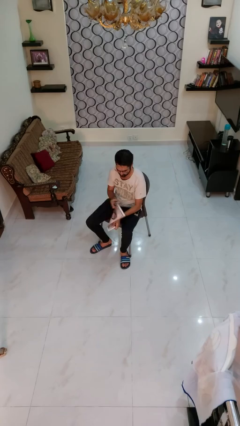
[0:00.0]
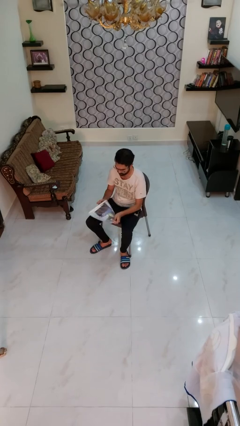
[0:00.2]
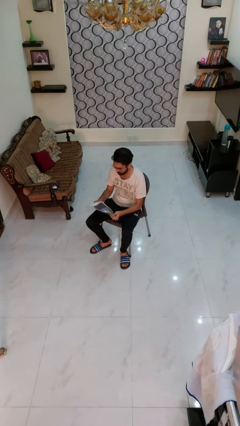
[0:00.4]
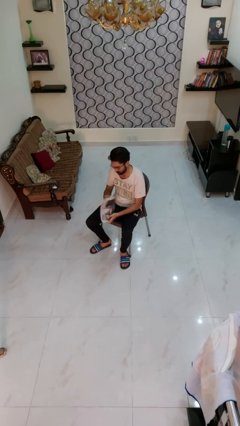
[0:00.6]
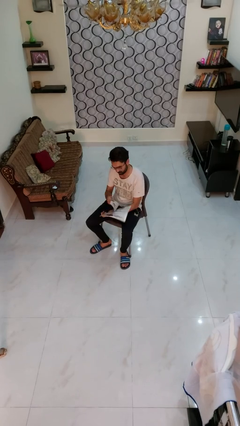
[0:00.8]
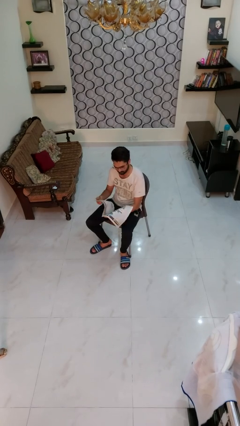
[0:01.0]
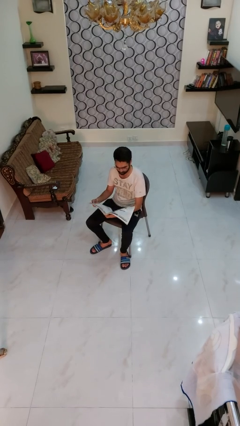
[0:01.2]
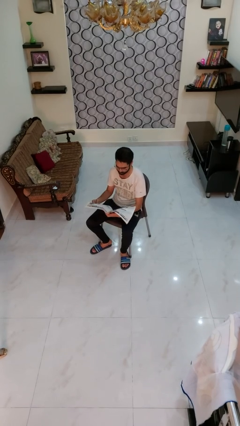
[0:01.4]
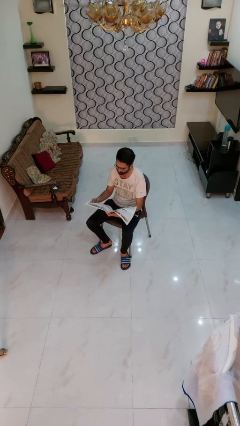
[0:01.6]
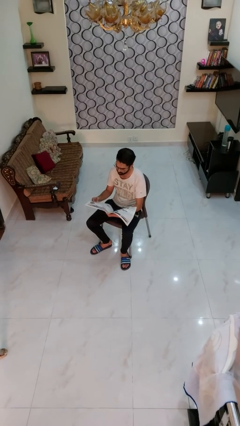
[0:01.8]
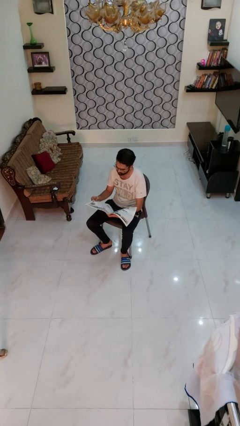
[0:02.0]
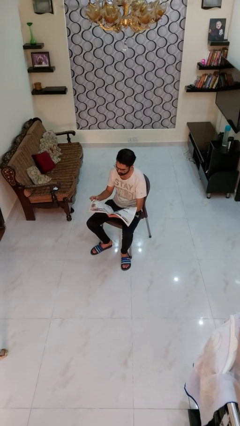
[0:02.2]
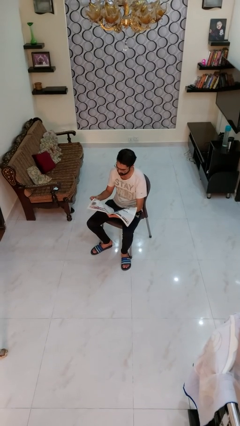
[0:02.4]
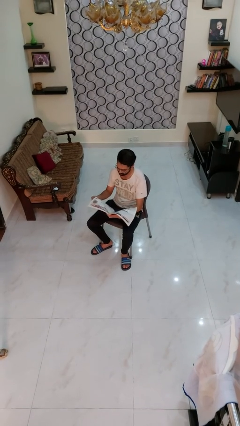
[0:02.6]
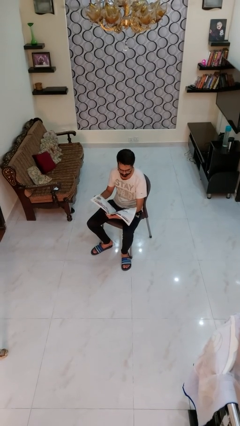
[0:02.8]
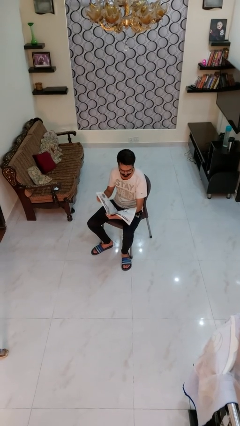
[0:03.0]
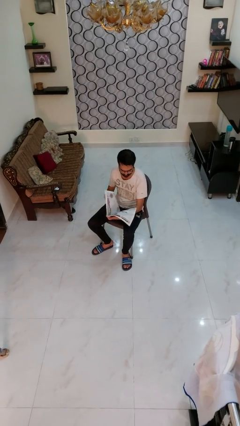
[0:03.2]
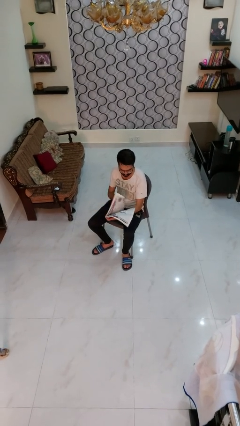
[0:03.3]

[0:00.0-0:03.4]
person reads magazine

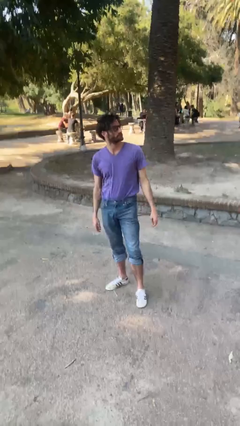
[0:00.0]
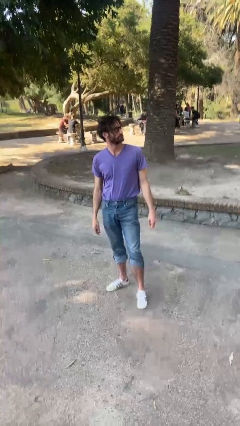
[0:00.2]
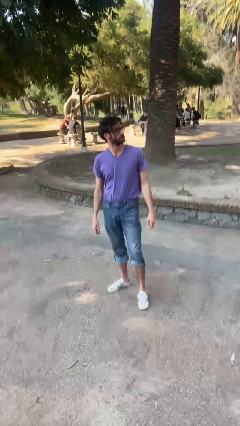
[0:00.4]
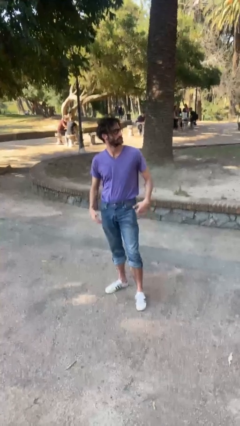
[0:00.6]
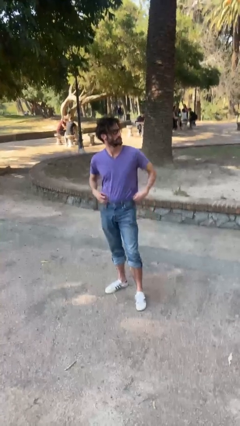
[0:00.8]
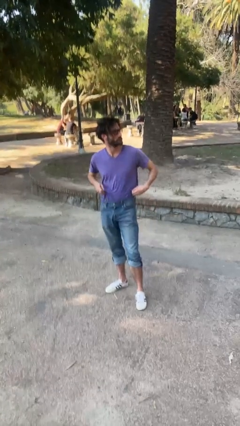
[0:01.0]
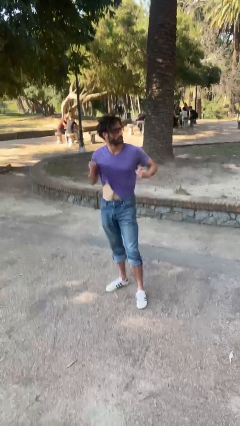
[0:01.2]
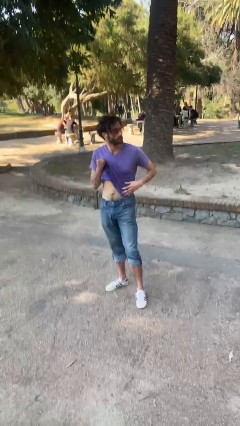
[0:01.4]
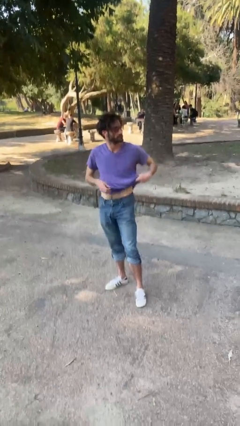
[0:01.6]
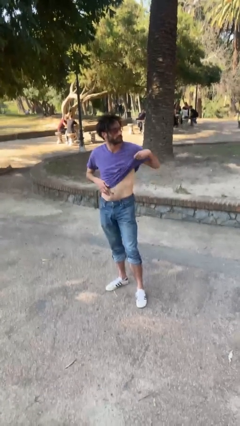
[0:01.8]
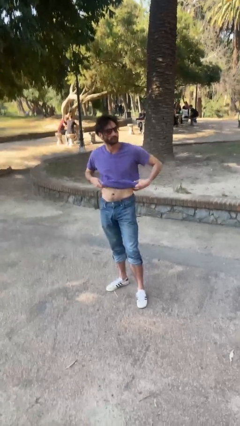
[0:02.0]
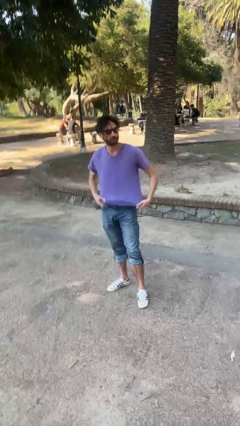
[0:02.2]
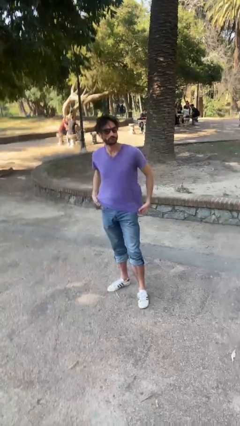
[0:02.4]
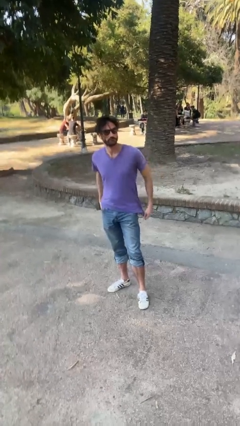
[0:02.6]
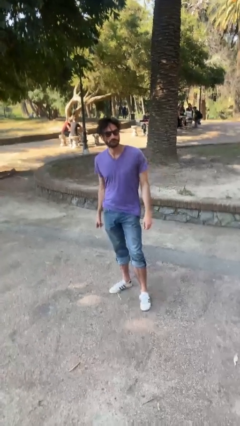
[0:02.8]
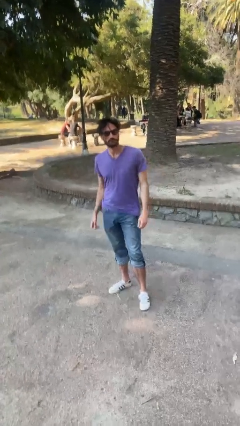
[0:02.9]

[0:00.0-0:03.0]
person untucks shirt

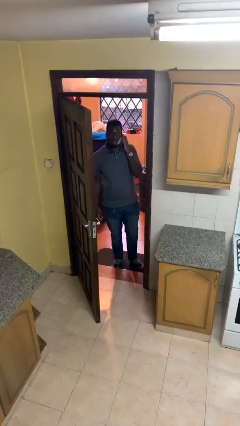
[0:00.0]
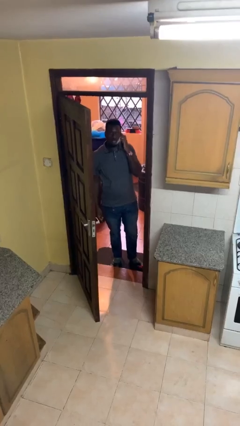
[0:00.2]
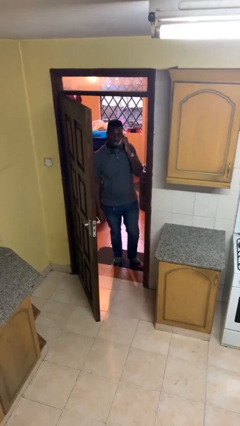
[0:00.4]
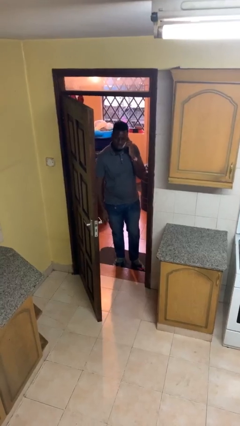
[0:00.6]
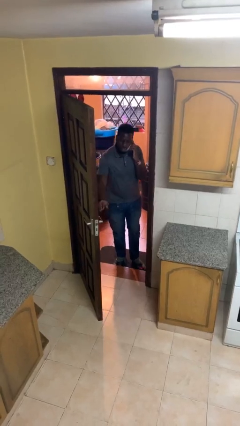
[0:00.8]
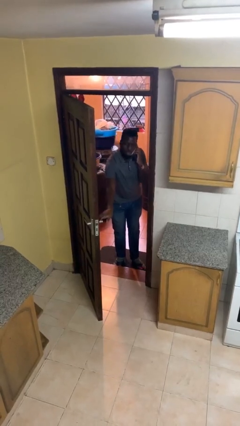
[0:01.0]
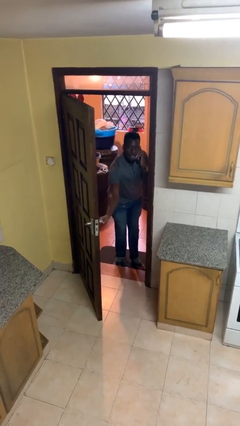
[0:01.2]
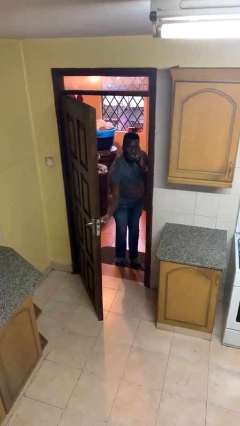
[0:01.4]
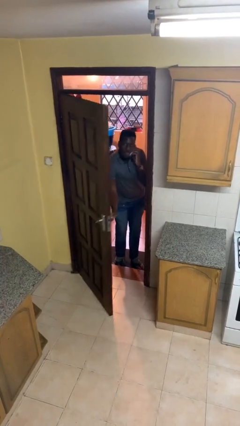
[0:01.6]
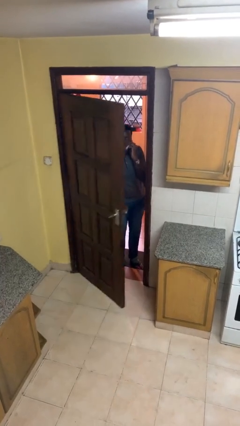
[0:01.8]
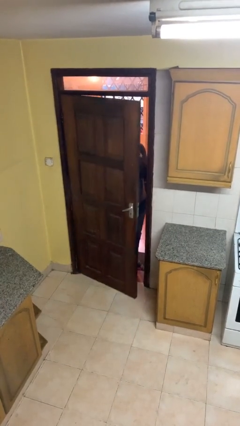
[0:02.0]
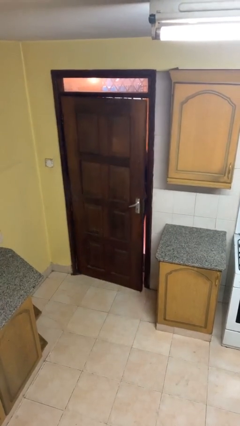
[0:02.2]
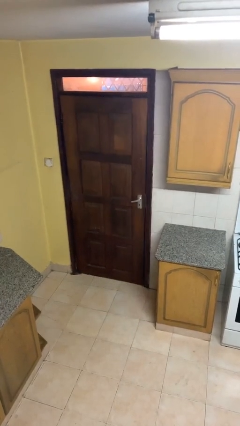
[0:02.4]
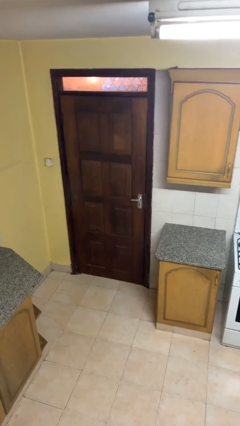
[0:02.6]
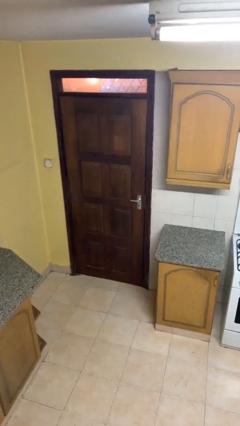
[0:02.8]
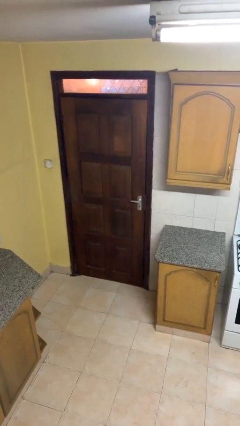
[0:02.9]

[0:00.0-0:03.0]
person closes facility door

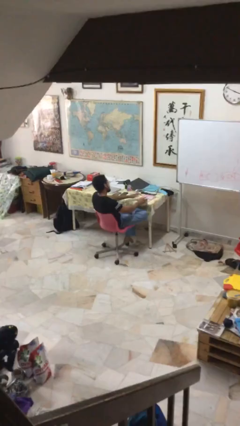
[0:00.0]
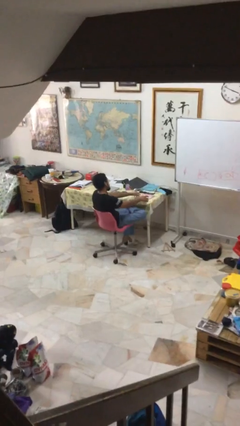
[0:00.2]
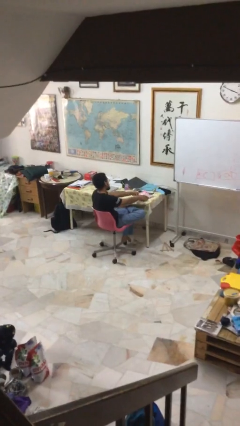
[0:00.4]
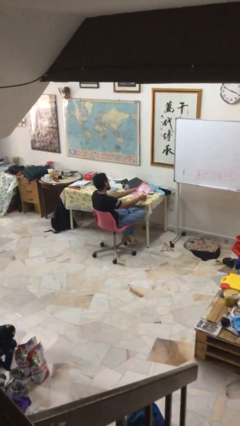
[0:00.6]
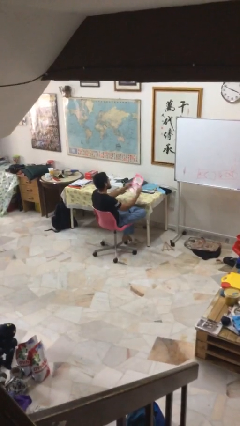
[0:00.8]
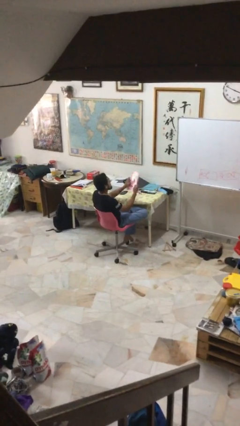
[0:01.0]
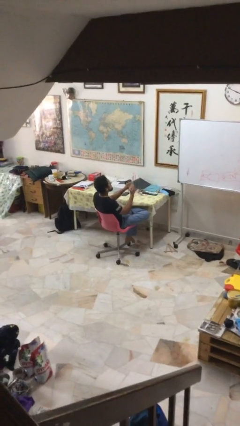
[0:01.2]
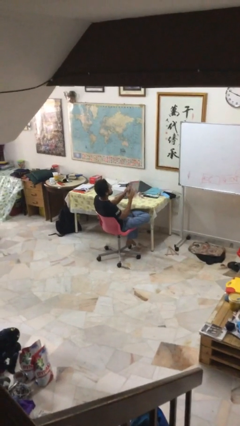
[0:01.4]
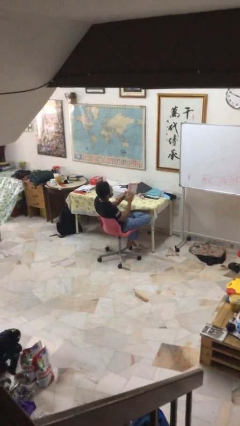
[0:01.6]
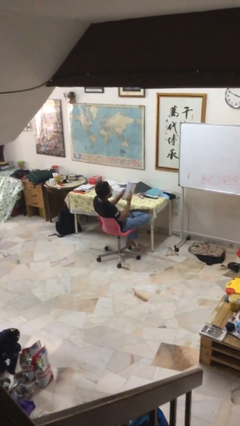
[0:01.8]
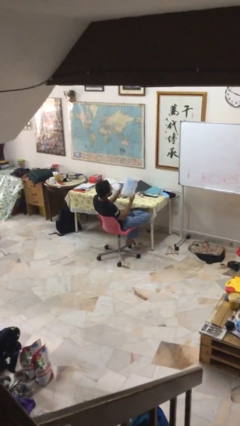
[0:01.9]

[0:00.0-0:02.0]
person picks up object from table

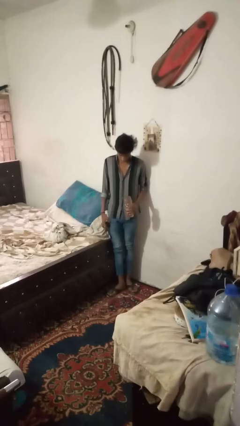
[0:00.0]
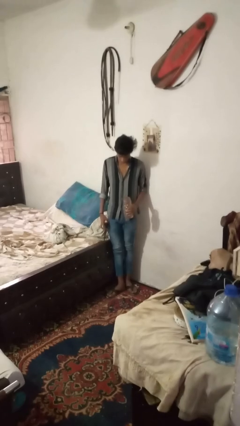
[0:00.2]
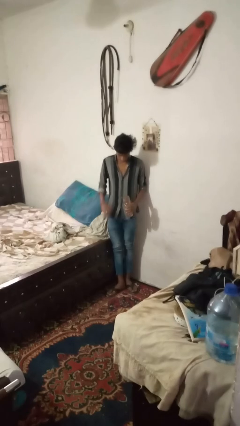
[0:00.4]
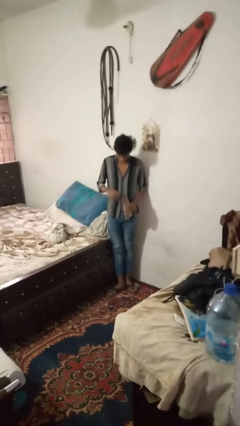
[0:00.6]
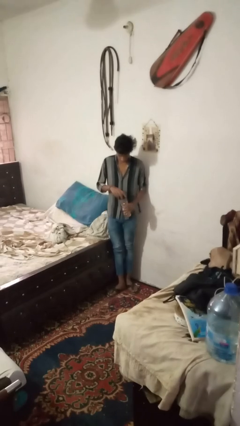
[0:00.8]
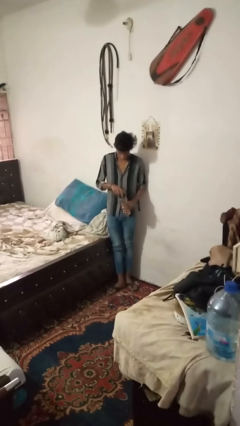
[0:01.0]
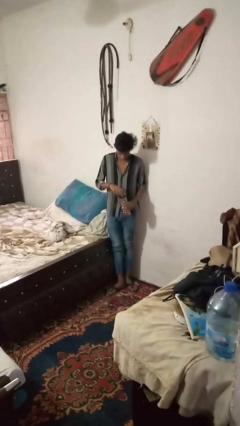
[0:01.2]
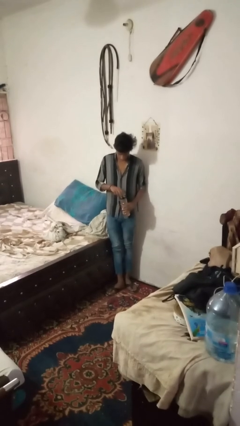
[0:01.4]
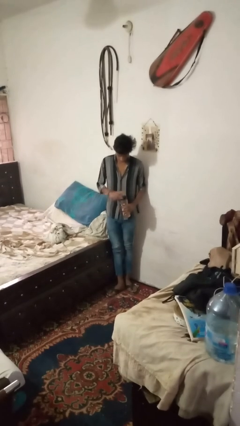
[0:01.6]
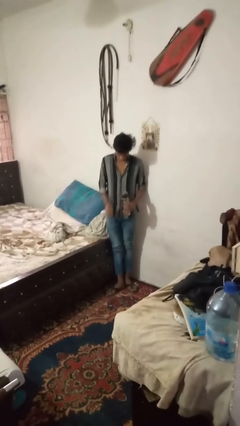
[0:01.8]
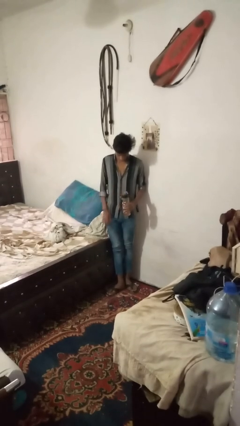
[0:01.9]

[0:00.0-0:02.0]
person screws lid to bottle

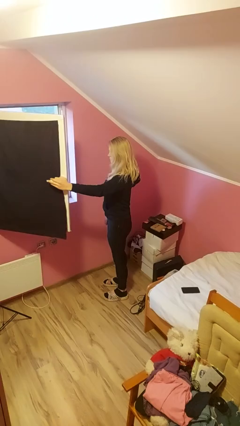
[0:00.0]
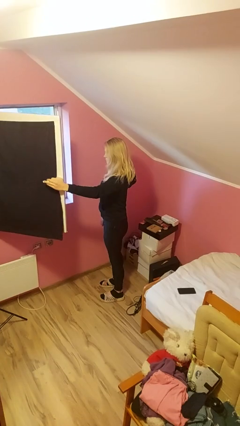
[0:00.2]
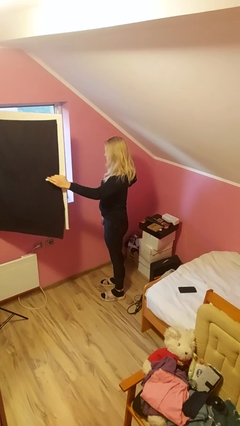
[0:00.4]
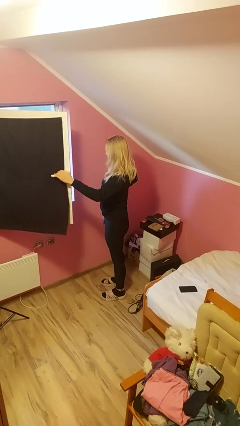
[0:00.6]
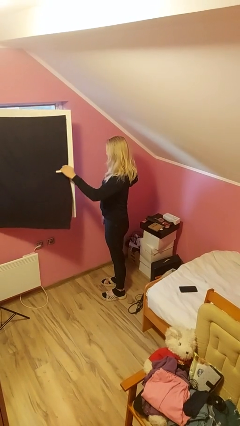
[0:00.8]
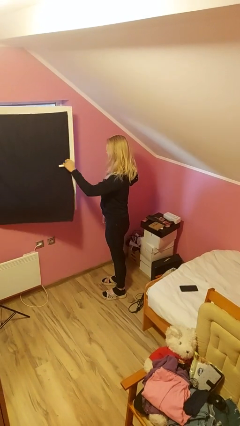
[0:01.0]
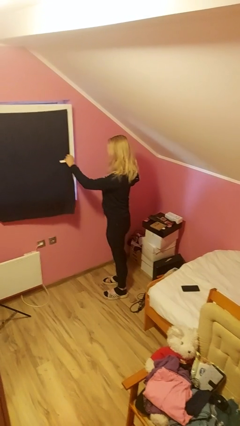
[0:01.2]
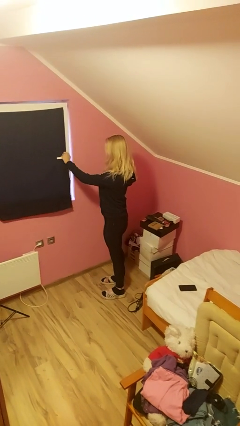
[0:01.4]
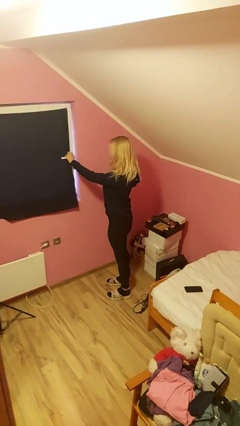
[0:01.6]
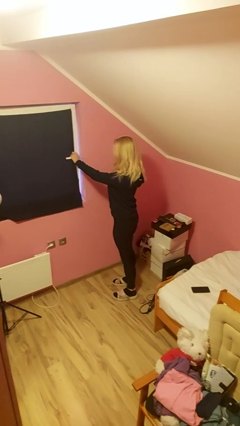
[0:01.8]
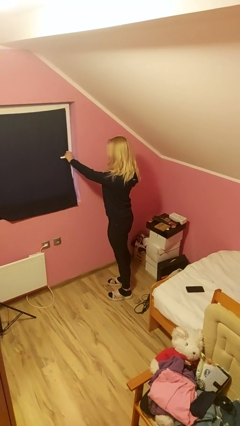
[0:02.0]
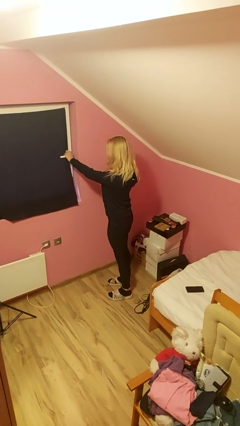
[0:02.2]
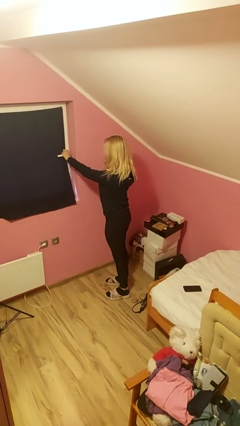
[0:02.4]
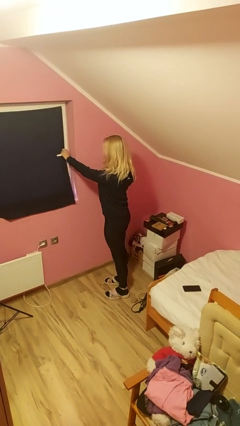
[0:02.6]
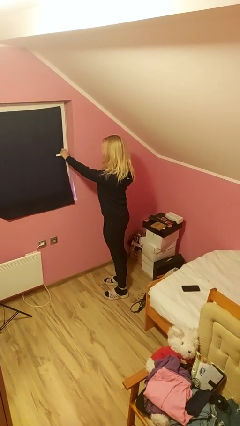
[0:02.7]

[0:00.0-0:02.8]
person closes home window

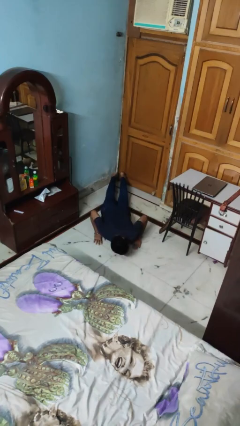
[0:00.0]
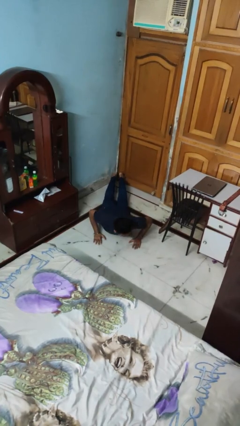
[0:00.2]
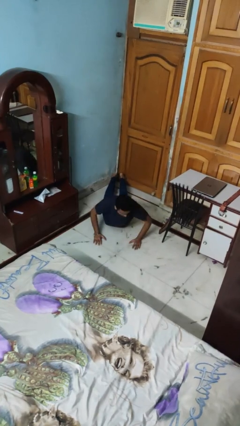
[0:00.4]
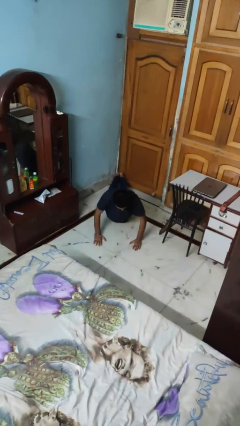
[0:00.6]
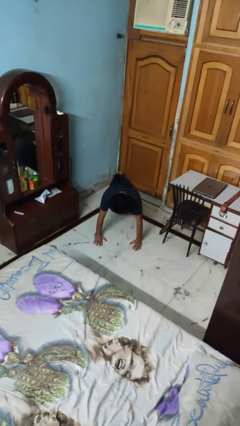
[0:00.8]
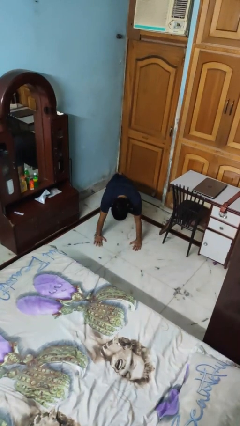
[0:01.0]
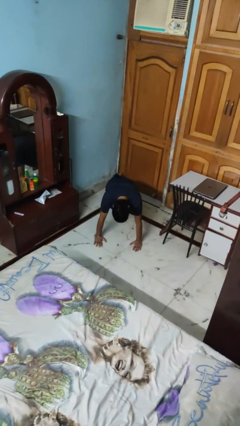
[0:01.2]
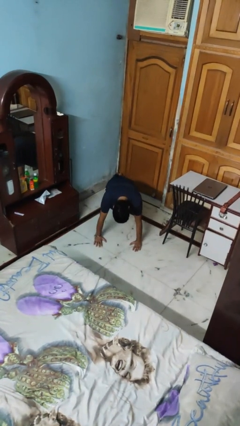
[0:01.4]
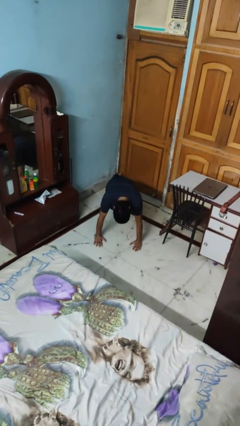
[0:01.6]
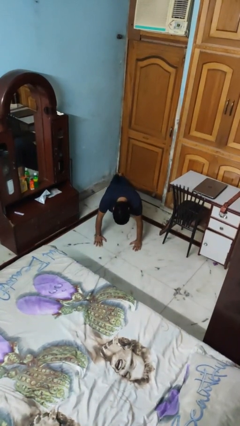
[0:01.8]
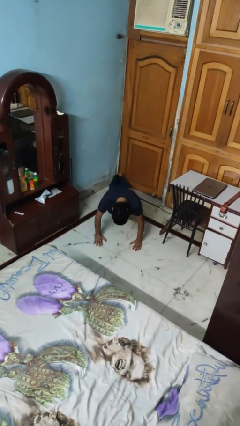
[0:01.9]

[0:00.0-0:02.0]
person exercises with pushup
